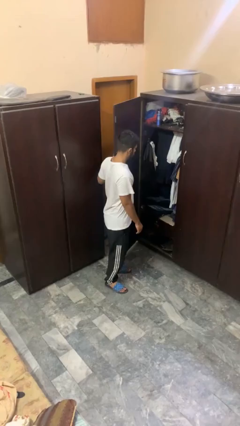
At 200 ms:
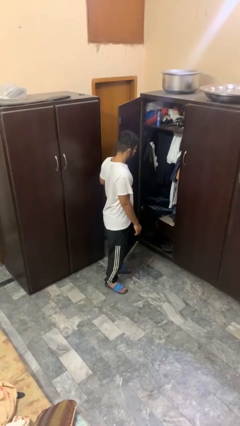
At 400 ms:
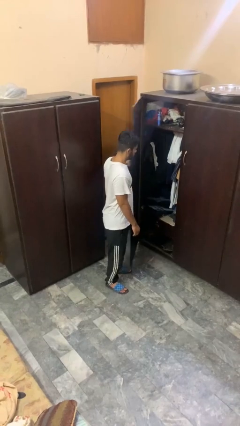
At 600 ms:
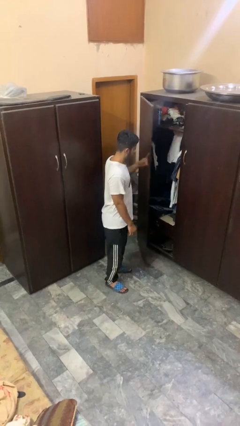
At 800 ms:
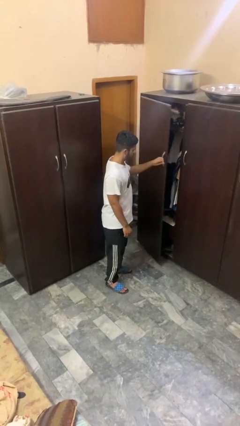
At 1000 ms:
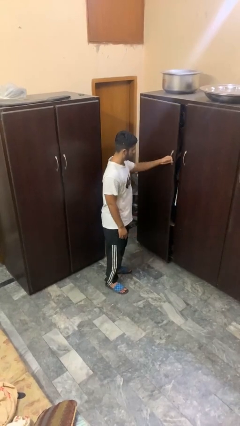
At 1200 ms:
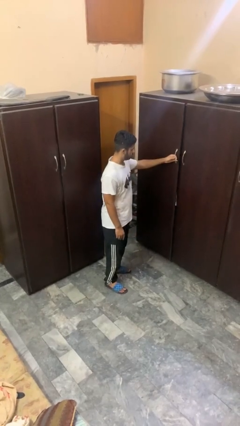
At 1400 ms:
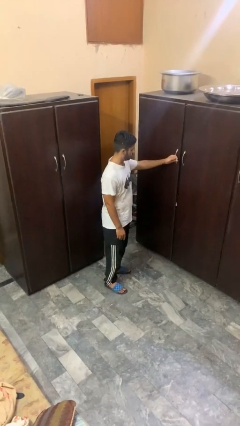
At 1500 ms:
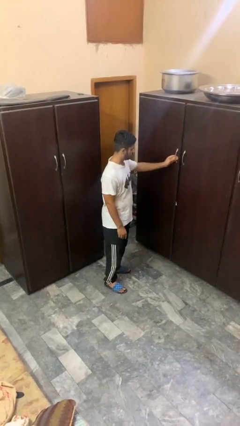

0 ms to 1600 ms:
person closes closet door

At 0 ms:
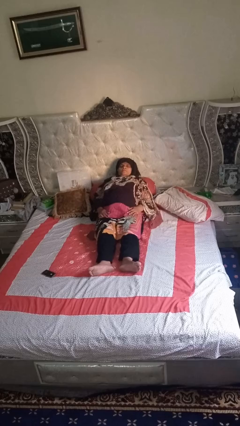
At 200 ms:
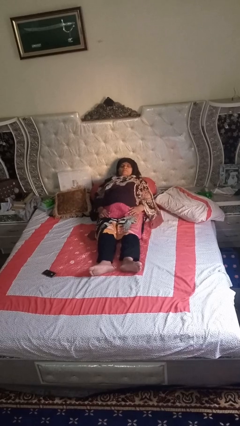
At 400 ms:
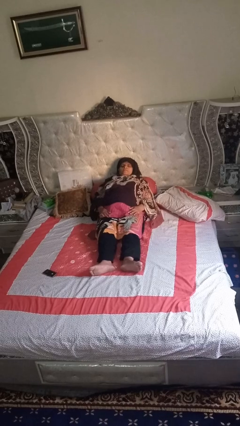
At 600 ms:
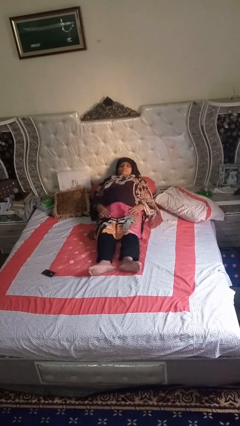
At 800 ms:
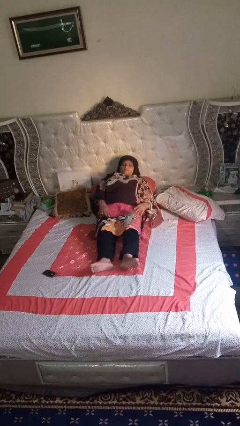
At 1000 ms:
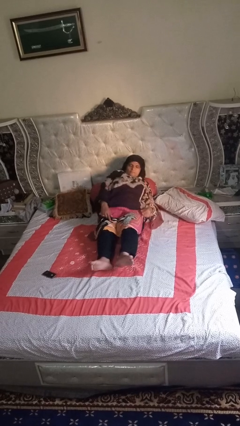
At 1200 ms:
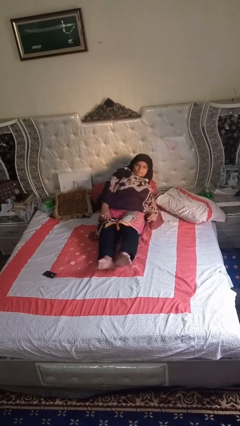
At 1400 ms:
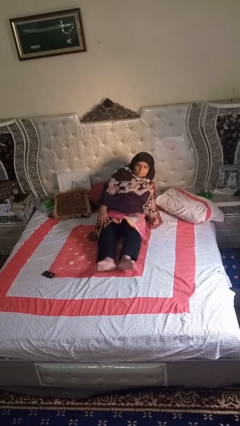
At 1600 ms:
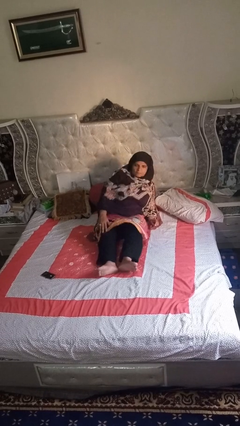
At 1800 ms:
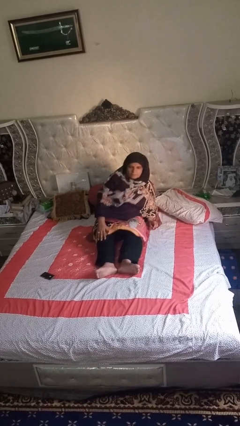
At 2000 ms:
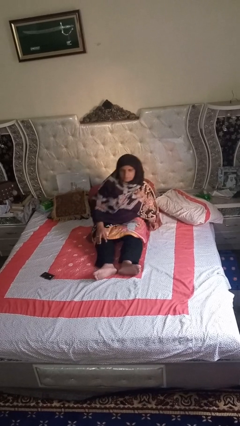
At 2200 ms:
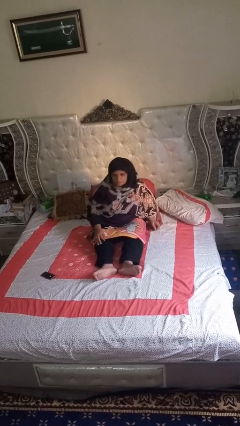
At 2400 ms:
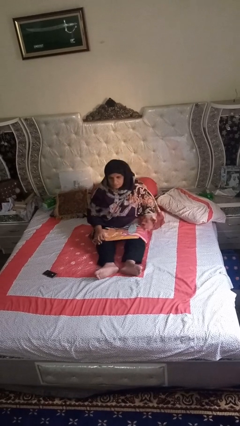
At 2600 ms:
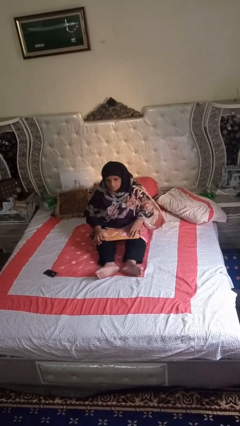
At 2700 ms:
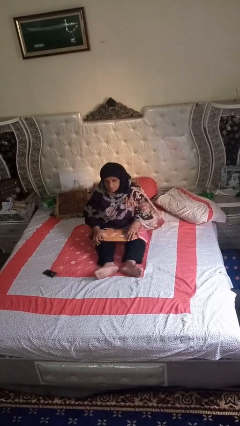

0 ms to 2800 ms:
person stands up

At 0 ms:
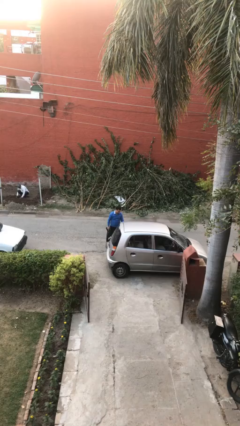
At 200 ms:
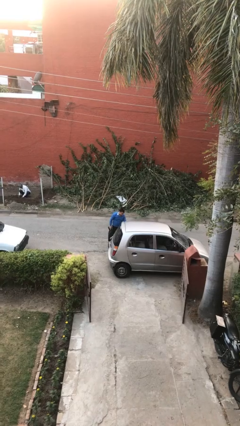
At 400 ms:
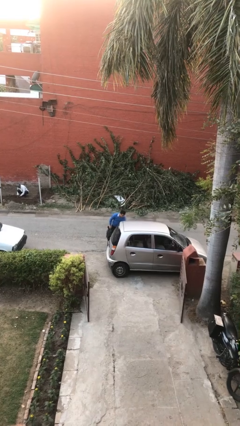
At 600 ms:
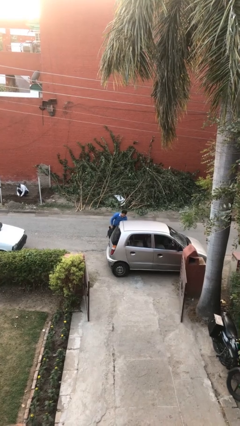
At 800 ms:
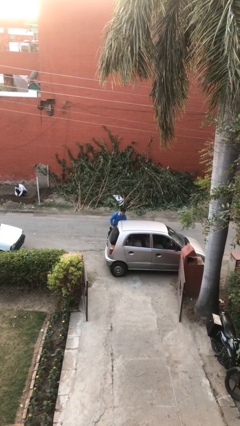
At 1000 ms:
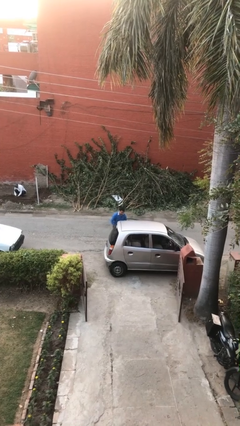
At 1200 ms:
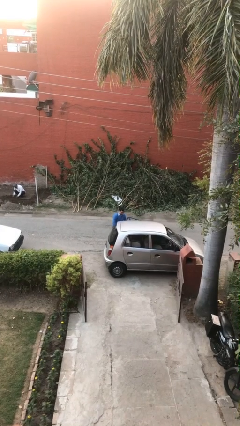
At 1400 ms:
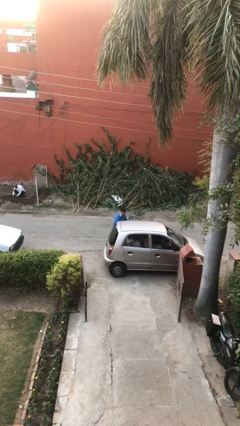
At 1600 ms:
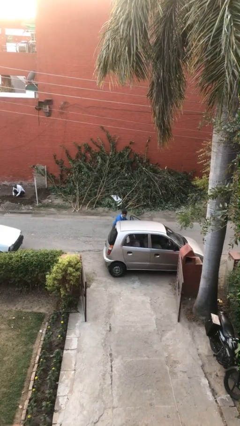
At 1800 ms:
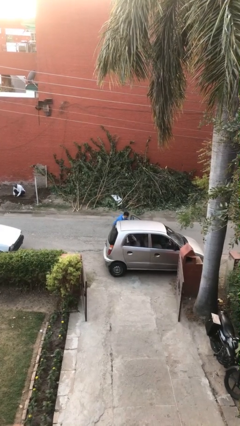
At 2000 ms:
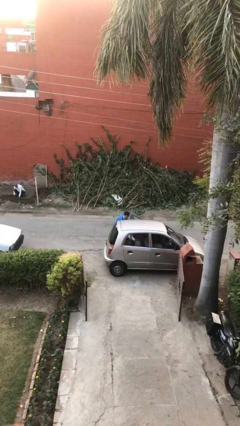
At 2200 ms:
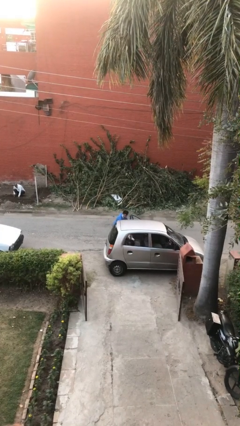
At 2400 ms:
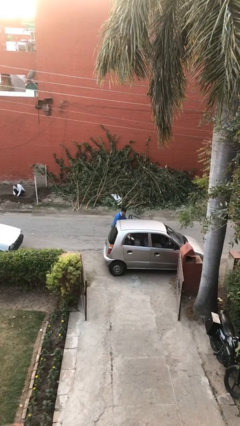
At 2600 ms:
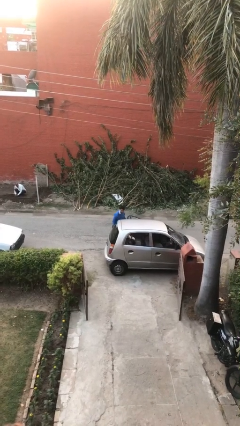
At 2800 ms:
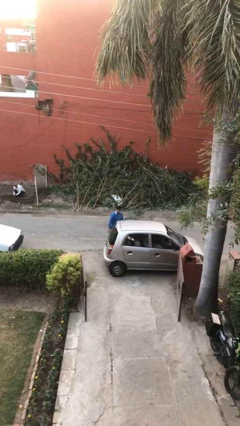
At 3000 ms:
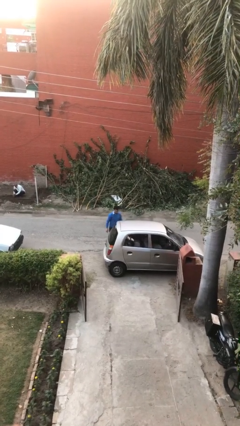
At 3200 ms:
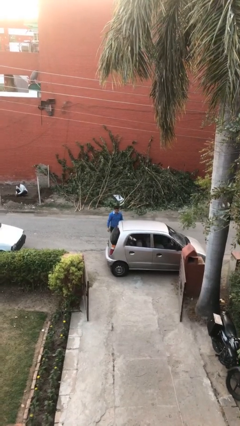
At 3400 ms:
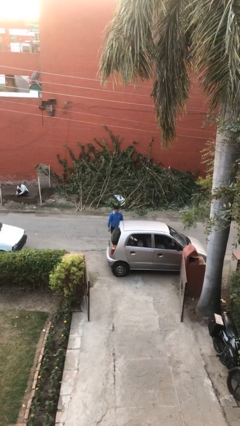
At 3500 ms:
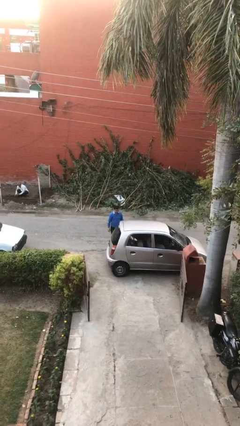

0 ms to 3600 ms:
person loads car

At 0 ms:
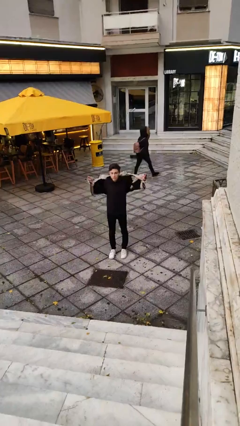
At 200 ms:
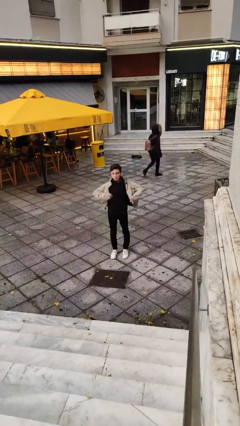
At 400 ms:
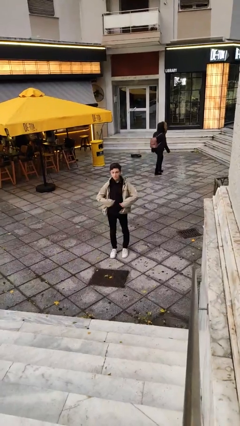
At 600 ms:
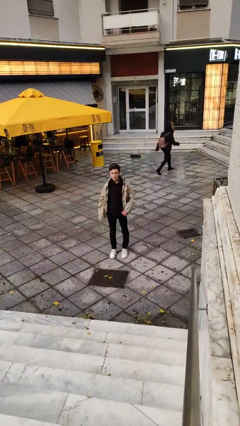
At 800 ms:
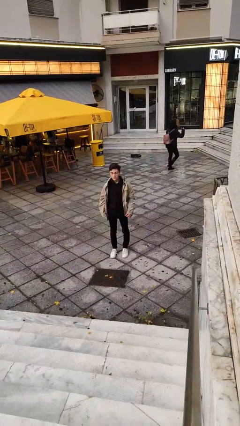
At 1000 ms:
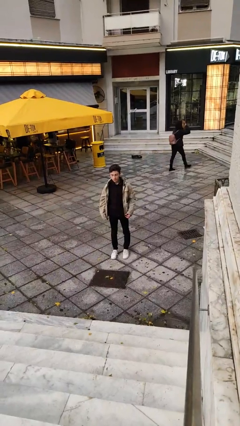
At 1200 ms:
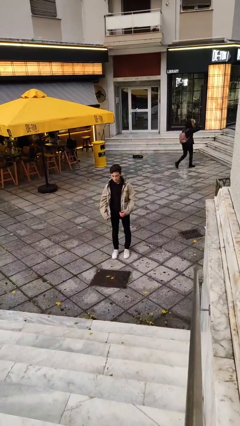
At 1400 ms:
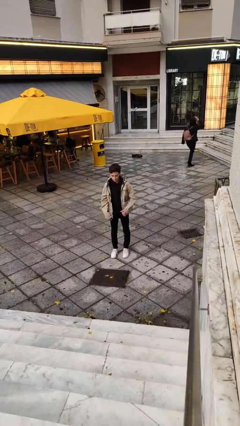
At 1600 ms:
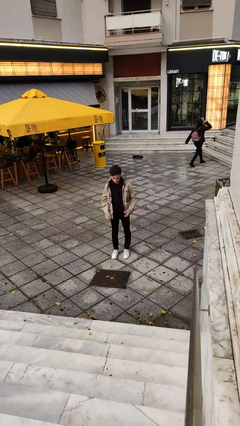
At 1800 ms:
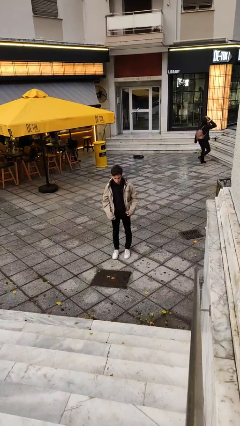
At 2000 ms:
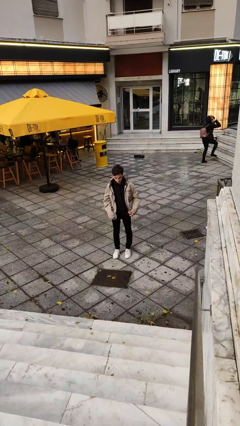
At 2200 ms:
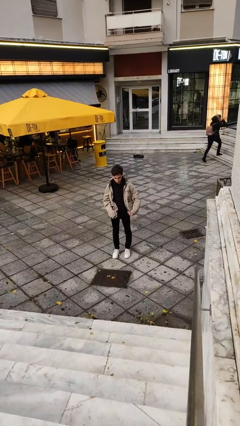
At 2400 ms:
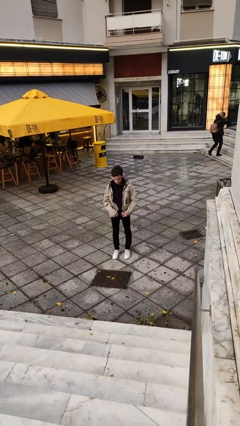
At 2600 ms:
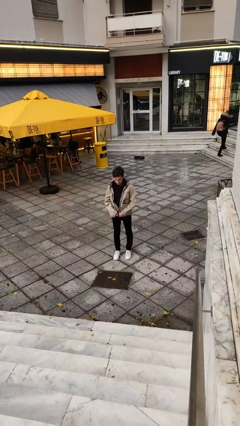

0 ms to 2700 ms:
person puts on jacket

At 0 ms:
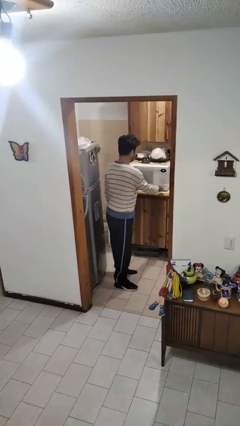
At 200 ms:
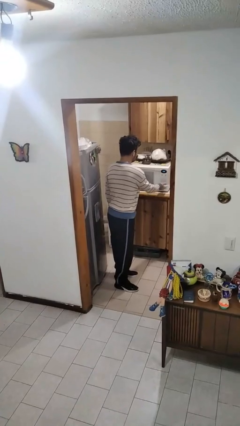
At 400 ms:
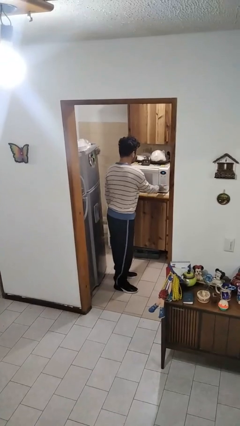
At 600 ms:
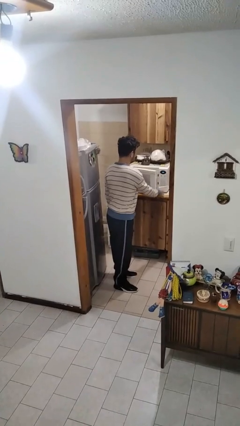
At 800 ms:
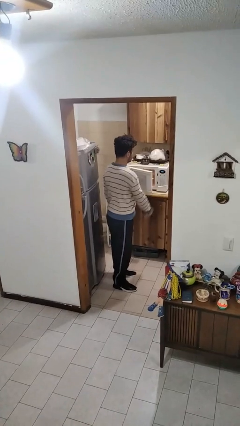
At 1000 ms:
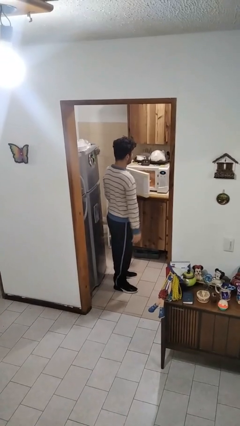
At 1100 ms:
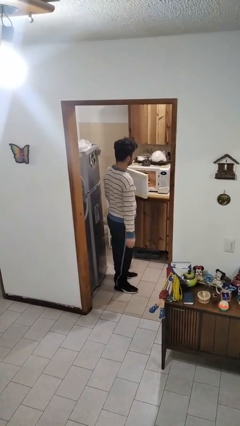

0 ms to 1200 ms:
person opens microwave

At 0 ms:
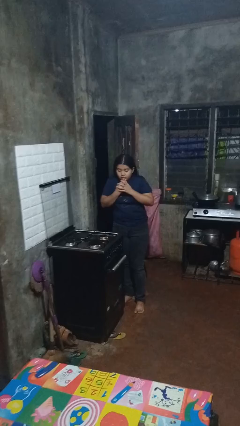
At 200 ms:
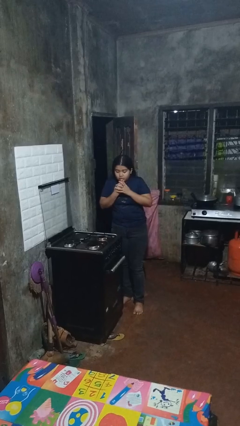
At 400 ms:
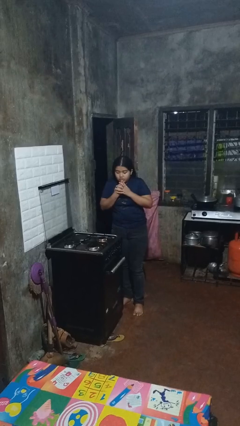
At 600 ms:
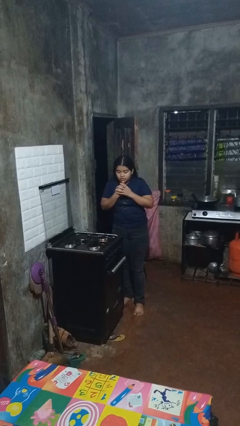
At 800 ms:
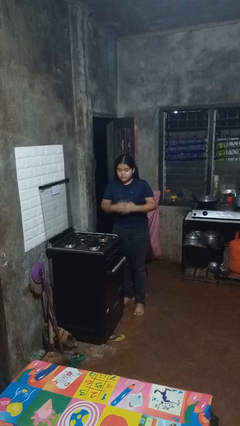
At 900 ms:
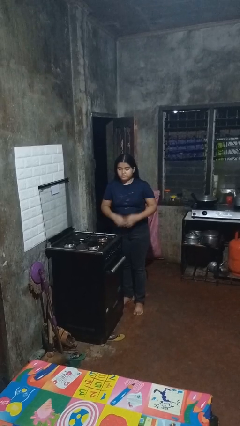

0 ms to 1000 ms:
person burns hand

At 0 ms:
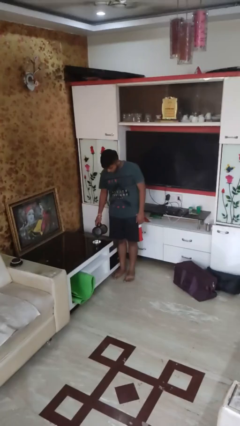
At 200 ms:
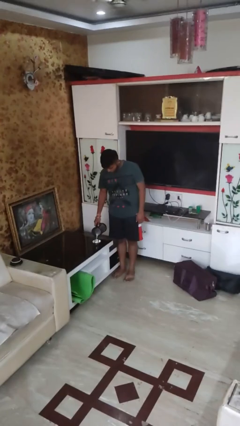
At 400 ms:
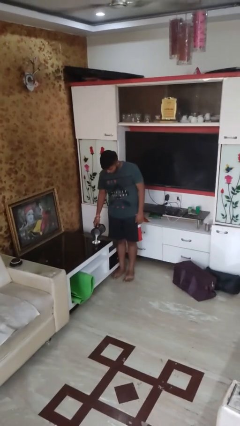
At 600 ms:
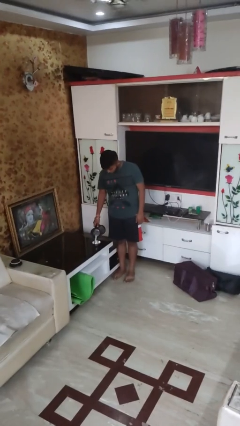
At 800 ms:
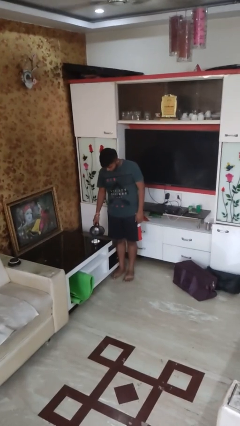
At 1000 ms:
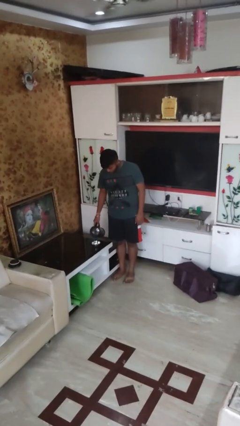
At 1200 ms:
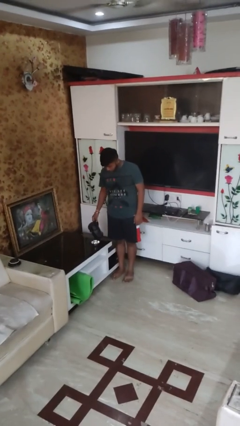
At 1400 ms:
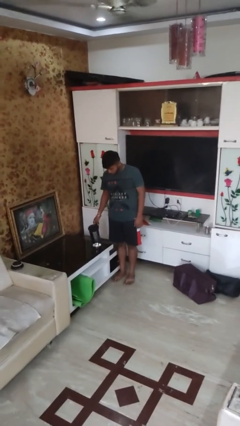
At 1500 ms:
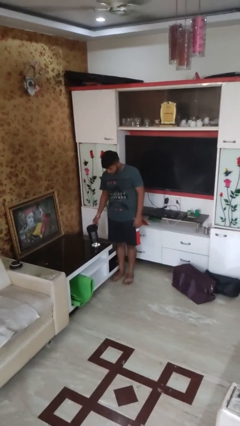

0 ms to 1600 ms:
person pours into bowl

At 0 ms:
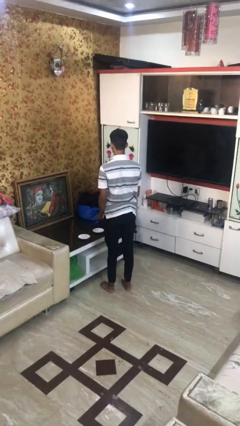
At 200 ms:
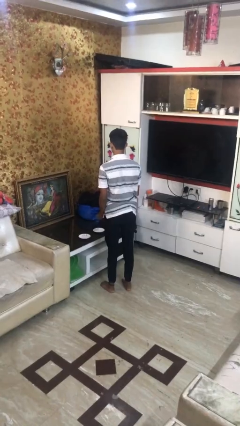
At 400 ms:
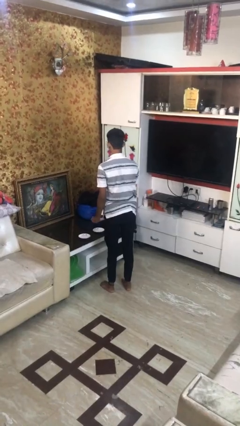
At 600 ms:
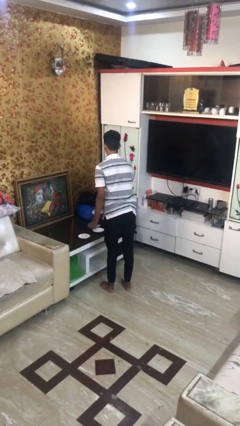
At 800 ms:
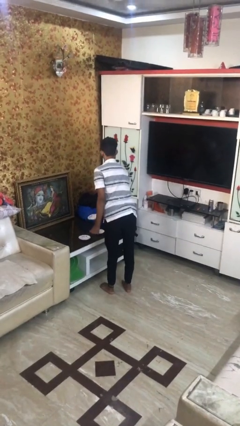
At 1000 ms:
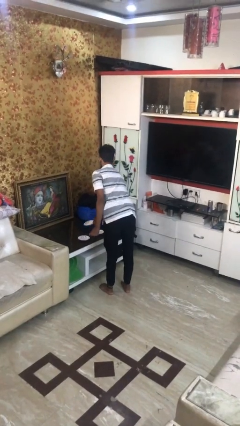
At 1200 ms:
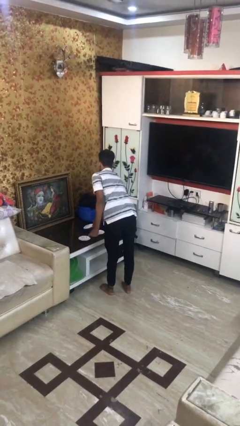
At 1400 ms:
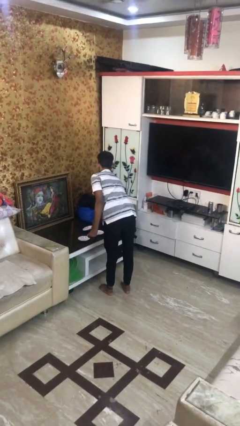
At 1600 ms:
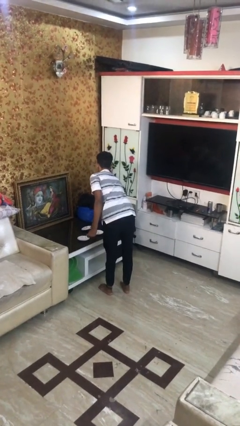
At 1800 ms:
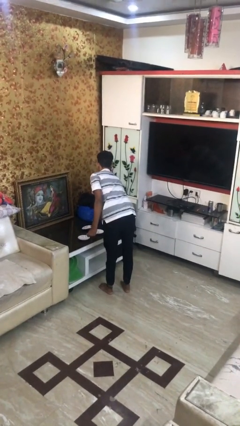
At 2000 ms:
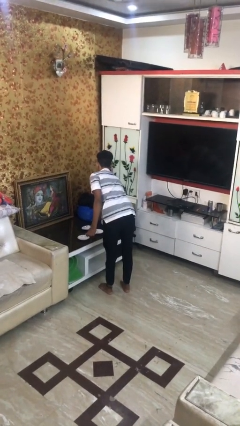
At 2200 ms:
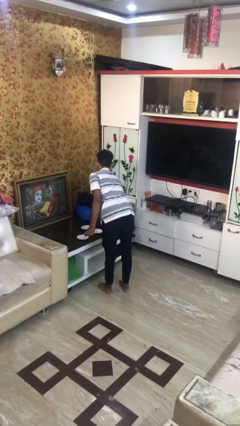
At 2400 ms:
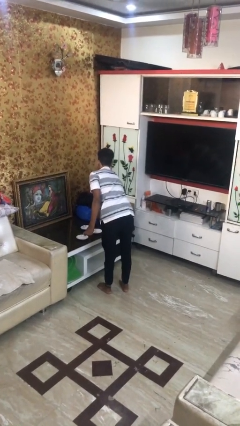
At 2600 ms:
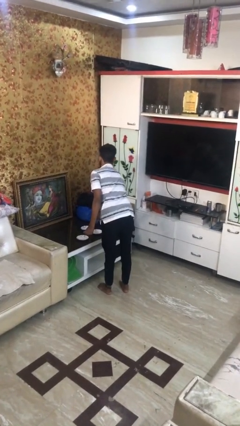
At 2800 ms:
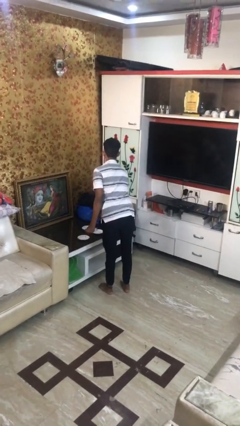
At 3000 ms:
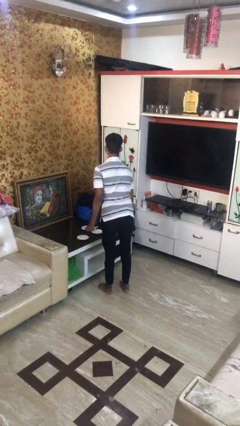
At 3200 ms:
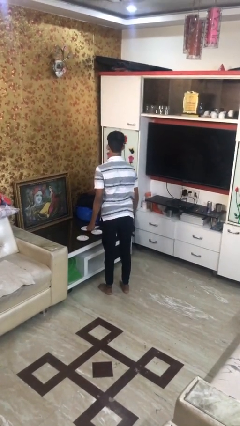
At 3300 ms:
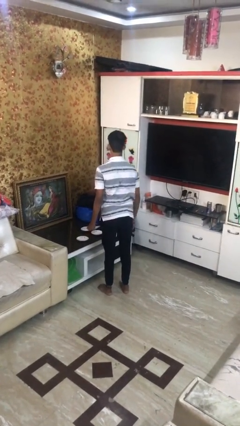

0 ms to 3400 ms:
person sets table
